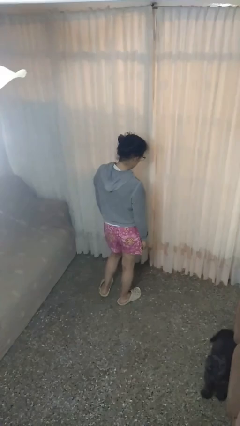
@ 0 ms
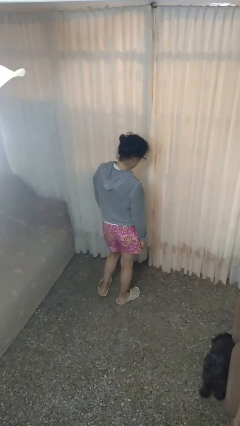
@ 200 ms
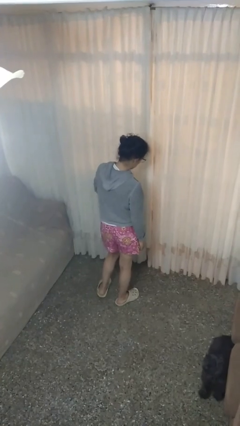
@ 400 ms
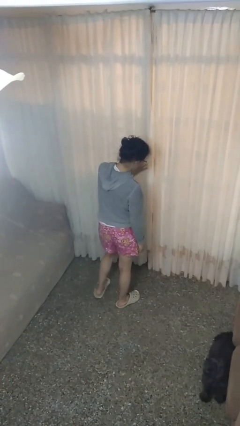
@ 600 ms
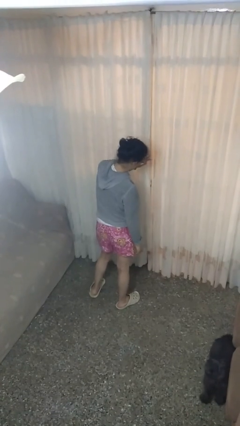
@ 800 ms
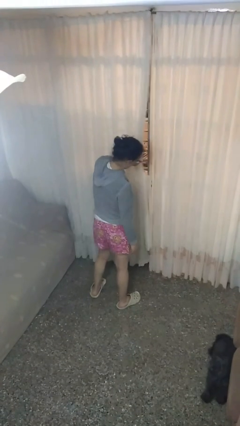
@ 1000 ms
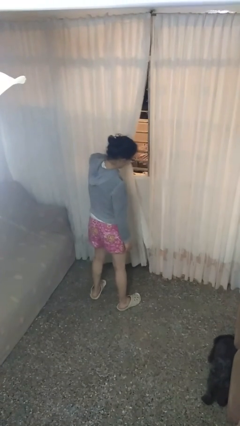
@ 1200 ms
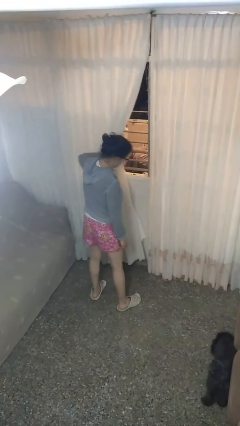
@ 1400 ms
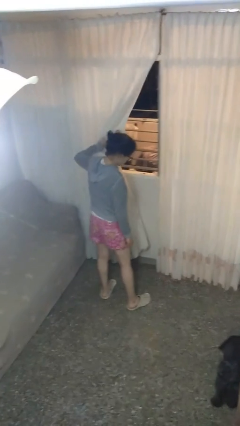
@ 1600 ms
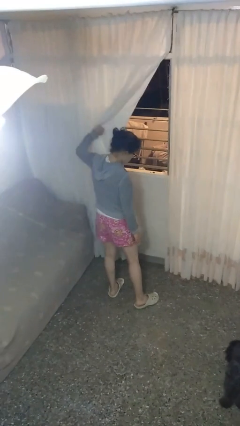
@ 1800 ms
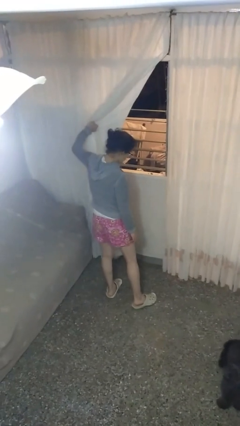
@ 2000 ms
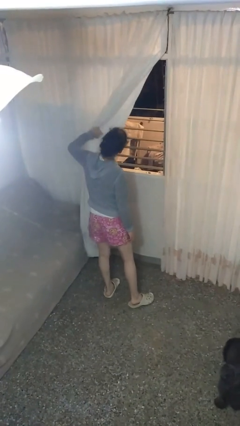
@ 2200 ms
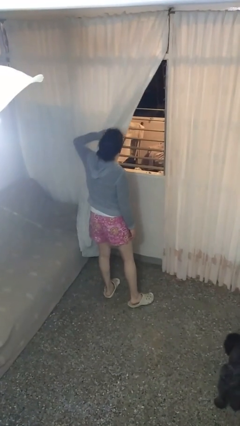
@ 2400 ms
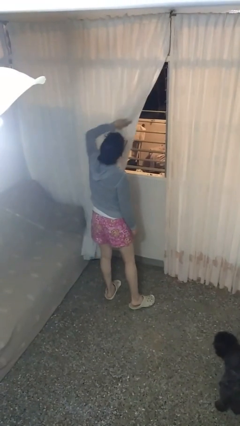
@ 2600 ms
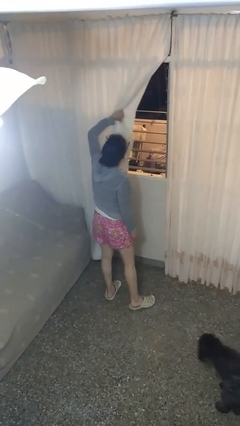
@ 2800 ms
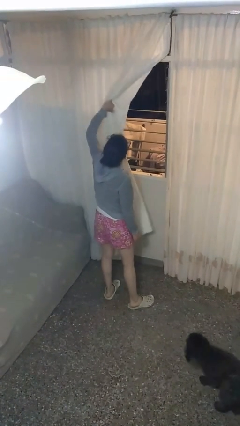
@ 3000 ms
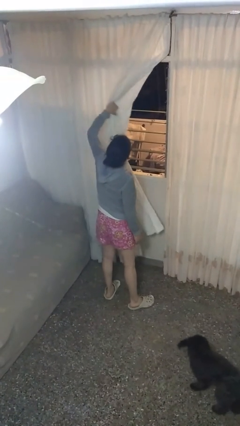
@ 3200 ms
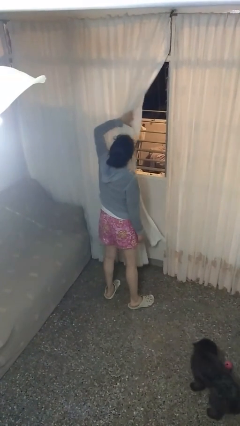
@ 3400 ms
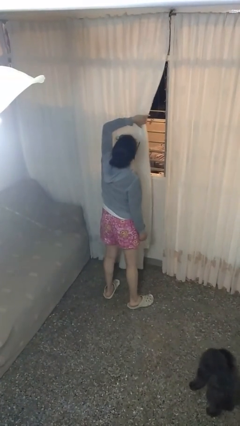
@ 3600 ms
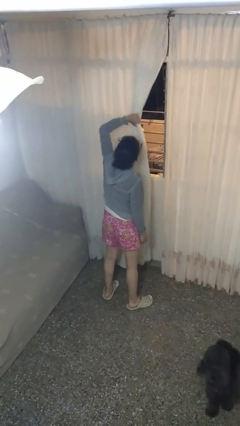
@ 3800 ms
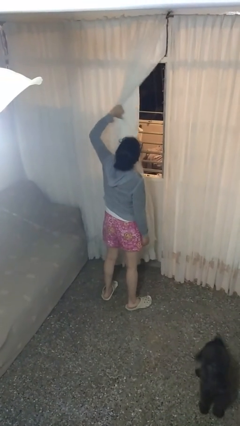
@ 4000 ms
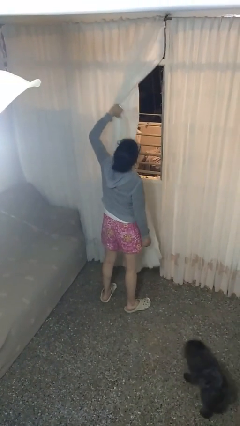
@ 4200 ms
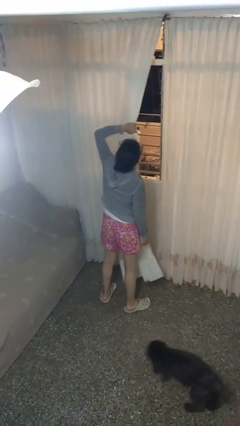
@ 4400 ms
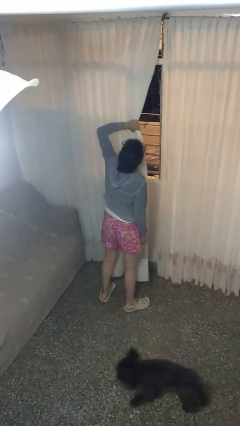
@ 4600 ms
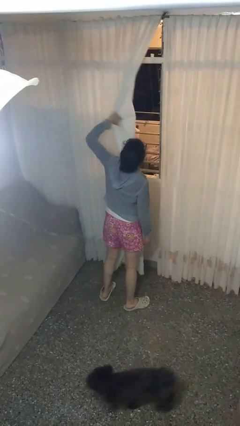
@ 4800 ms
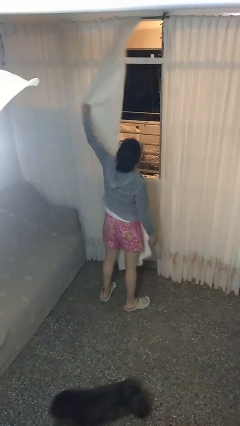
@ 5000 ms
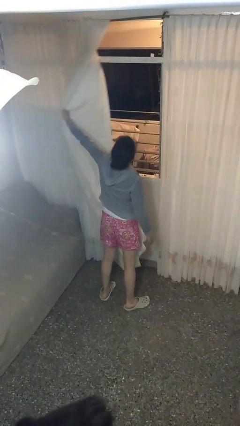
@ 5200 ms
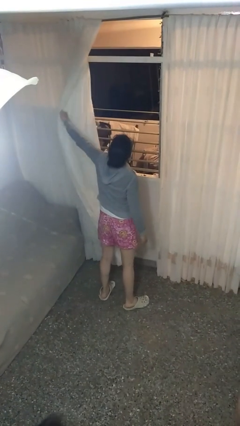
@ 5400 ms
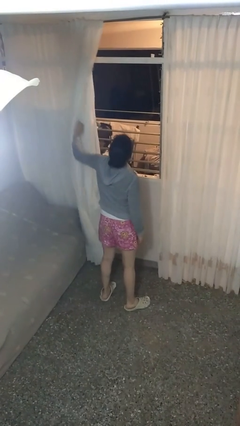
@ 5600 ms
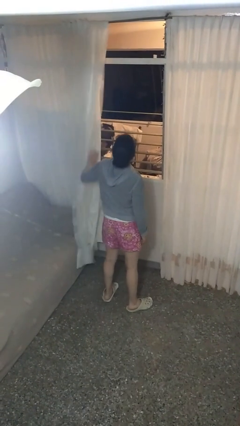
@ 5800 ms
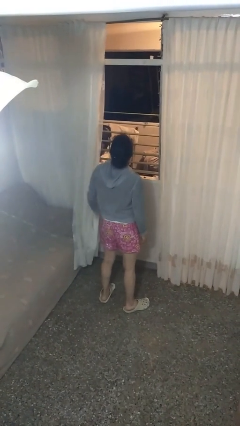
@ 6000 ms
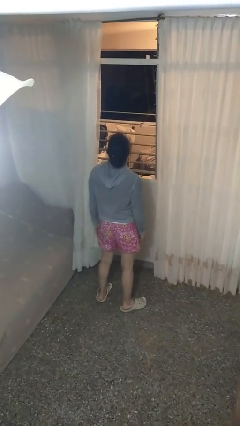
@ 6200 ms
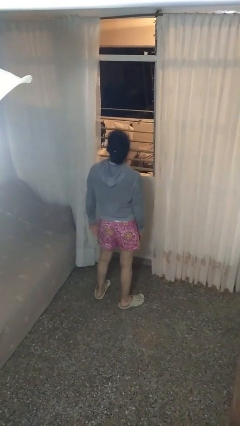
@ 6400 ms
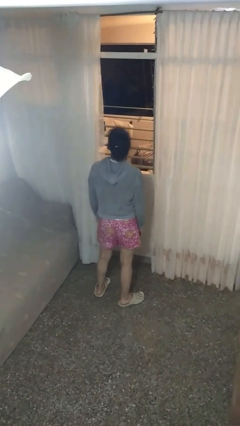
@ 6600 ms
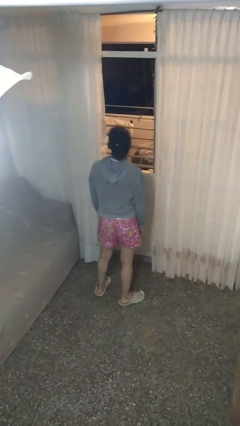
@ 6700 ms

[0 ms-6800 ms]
person opens curtains

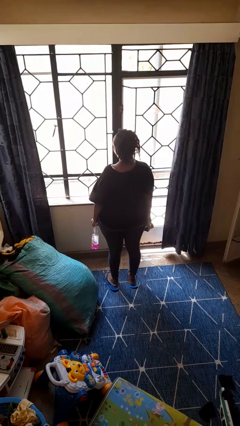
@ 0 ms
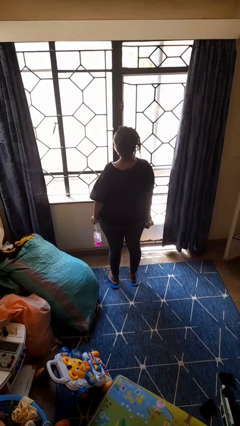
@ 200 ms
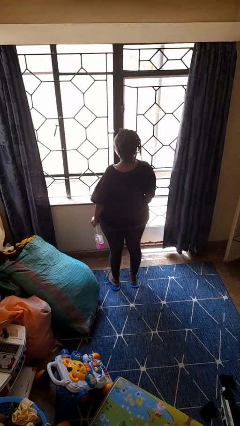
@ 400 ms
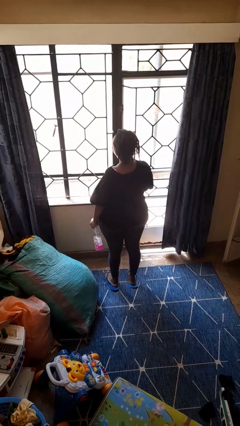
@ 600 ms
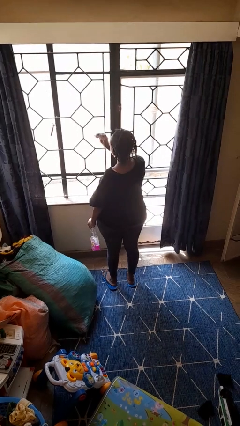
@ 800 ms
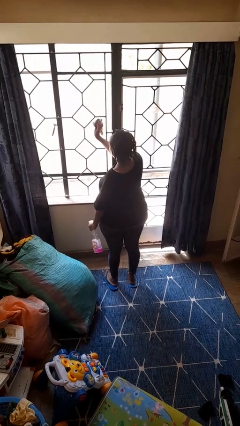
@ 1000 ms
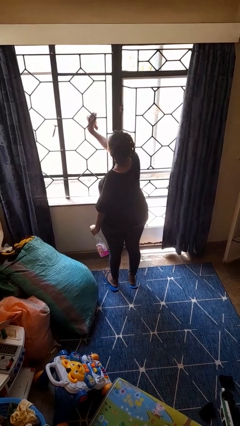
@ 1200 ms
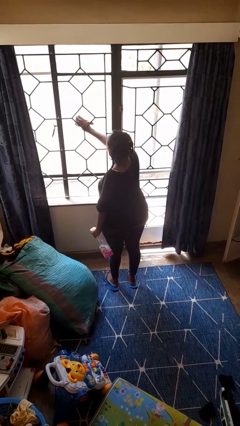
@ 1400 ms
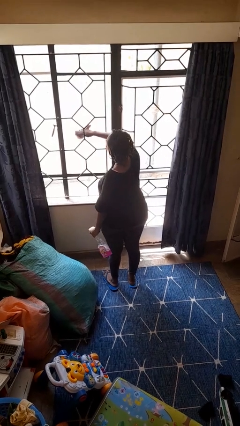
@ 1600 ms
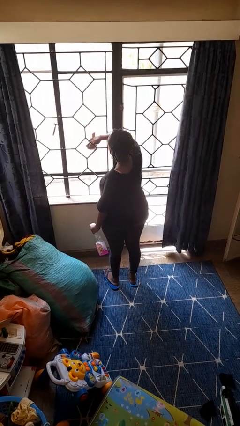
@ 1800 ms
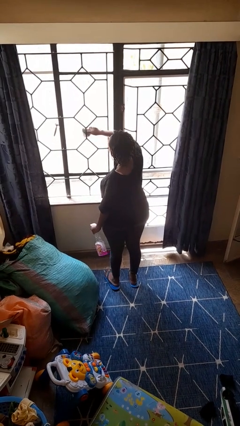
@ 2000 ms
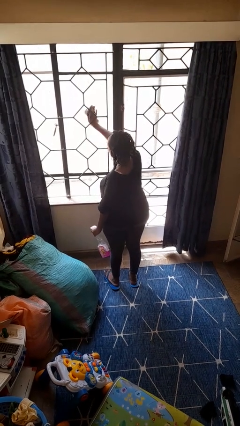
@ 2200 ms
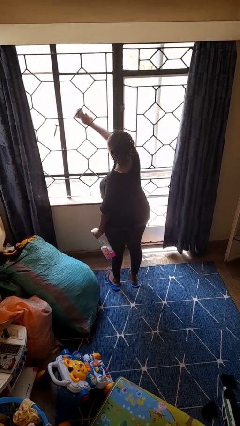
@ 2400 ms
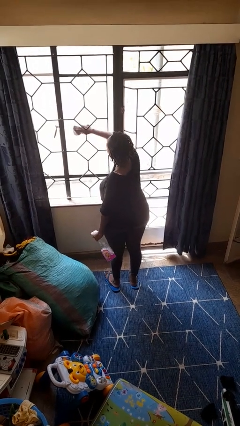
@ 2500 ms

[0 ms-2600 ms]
person washes window

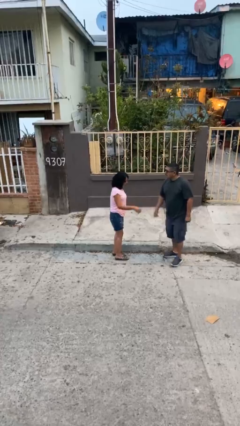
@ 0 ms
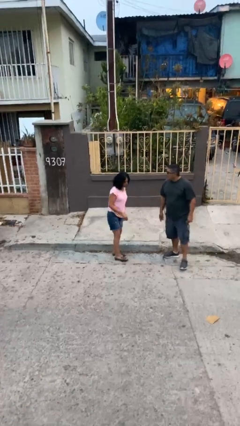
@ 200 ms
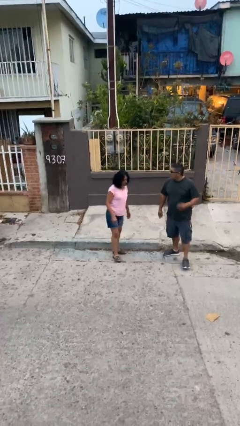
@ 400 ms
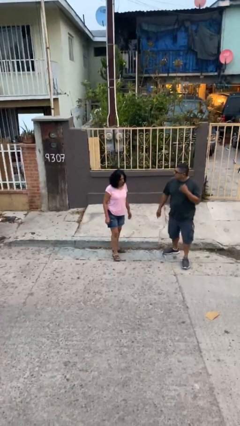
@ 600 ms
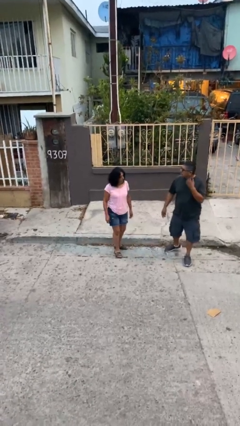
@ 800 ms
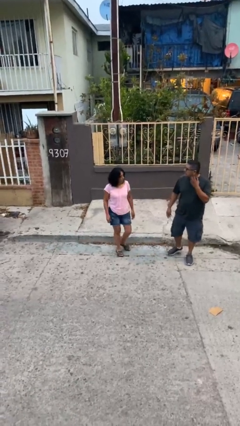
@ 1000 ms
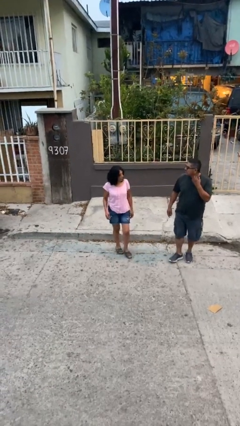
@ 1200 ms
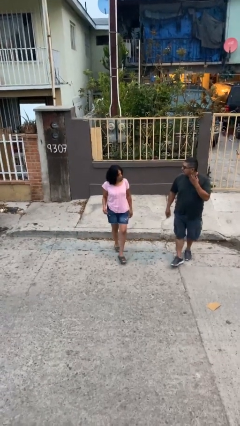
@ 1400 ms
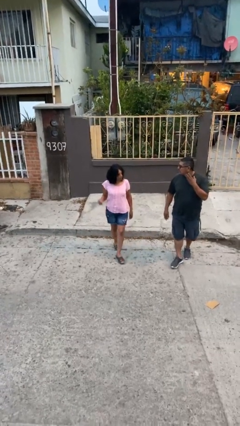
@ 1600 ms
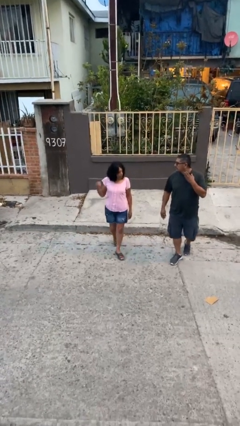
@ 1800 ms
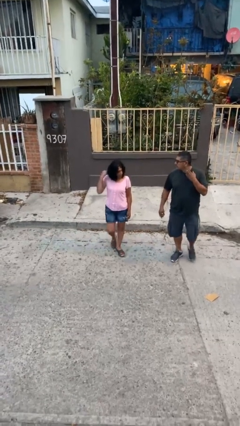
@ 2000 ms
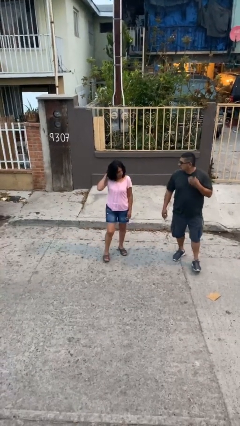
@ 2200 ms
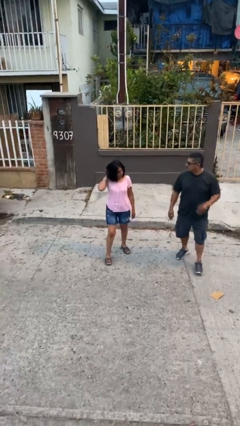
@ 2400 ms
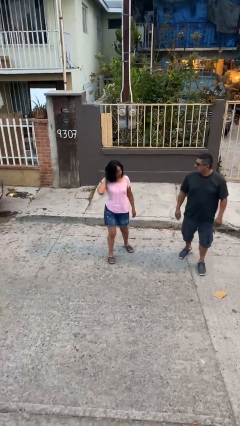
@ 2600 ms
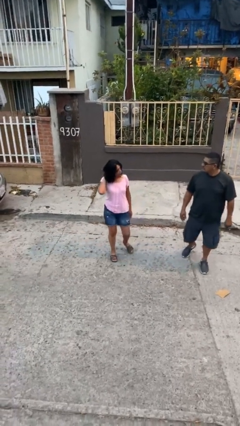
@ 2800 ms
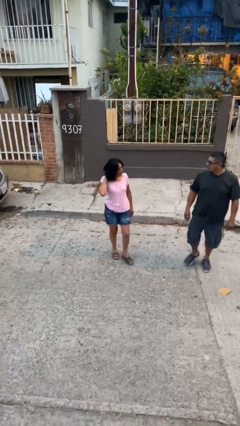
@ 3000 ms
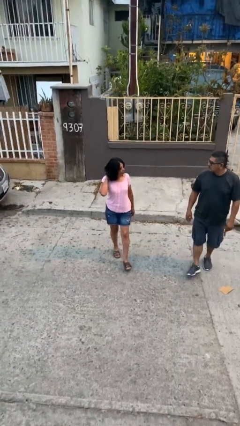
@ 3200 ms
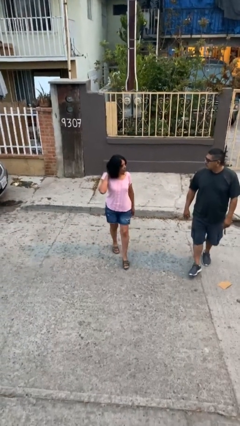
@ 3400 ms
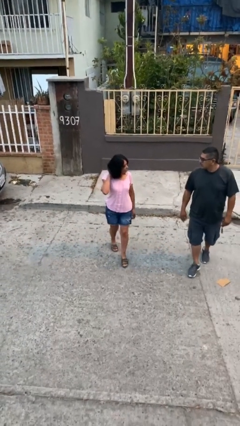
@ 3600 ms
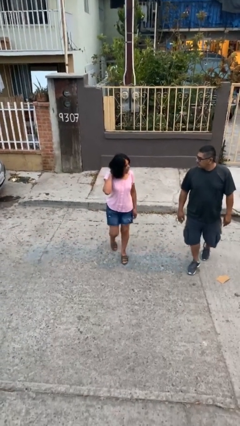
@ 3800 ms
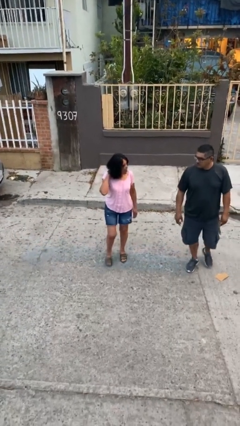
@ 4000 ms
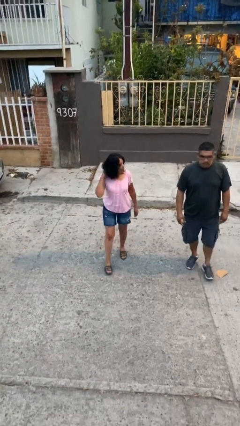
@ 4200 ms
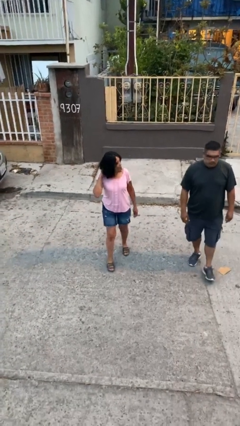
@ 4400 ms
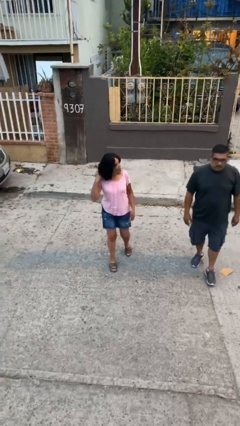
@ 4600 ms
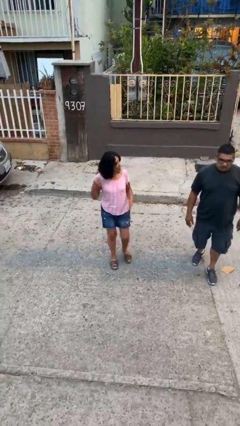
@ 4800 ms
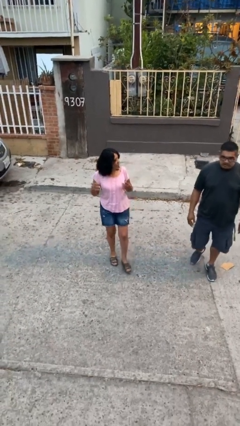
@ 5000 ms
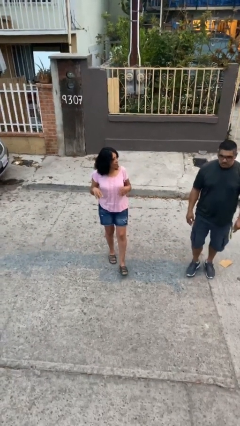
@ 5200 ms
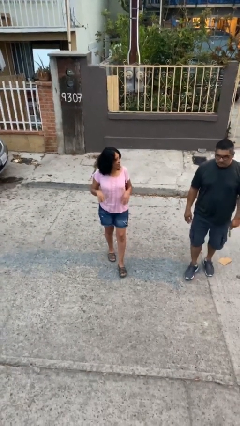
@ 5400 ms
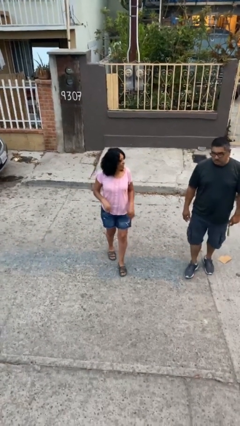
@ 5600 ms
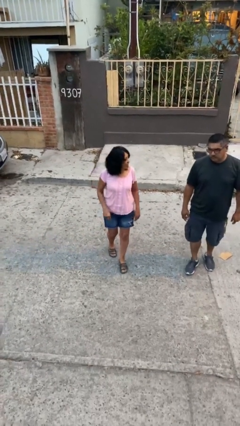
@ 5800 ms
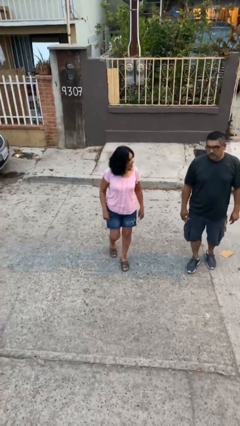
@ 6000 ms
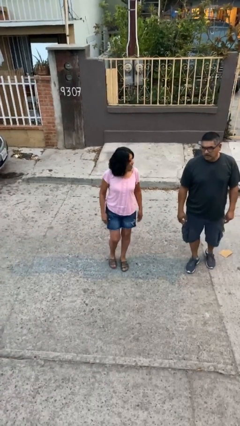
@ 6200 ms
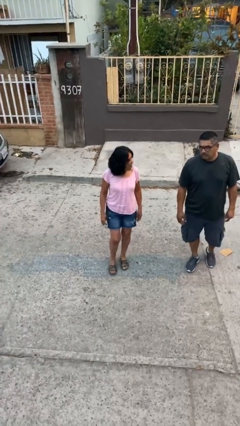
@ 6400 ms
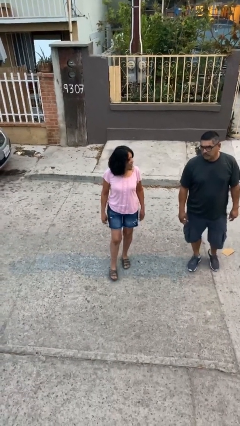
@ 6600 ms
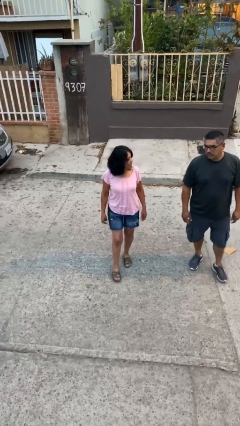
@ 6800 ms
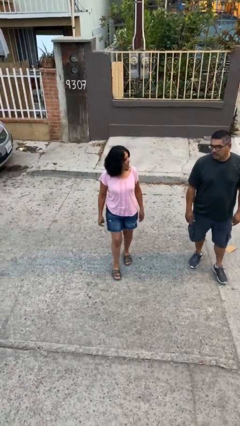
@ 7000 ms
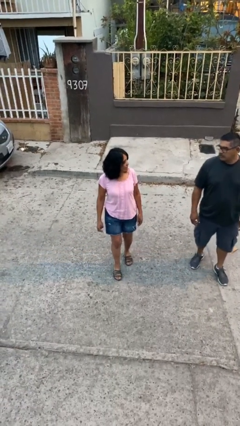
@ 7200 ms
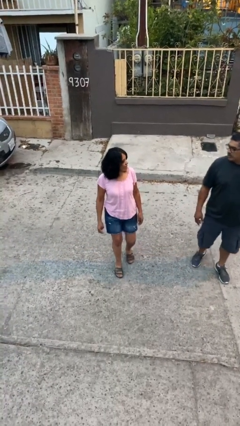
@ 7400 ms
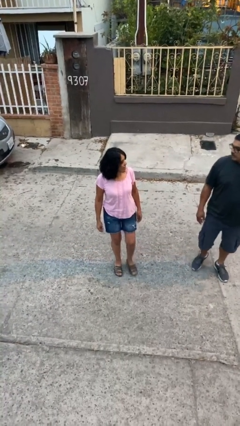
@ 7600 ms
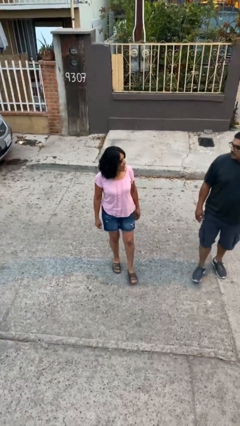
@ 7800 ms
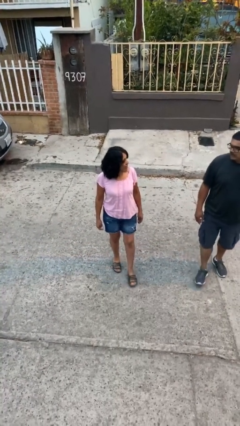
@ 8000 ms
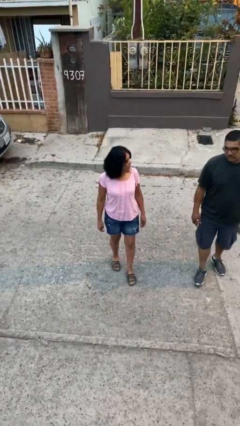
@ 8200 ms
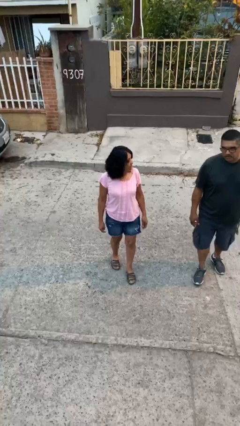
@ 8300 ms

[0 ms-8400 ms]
person talks to person
